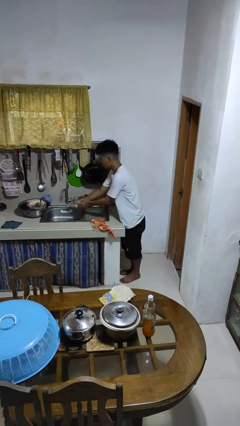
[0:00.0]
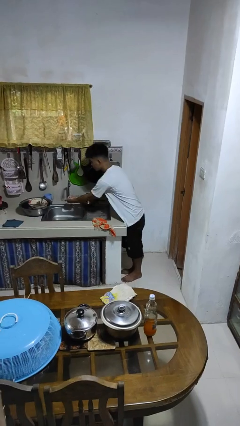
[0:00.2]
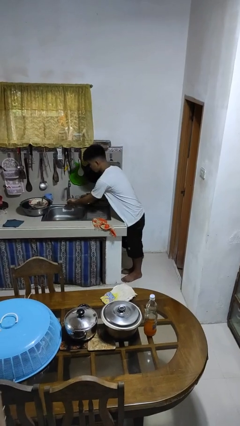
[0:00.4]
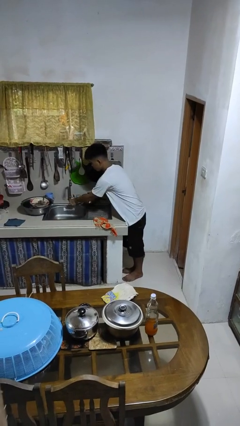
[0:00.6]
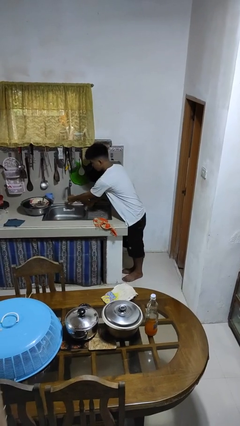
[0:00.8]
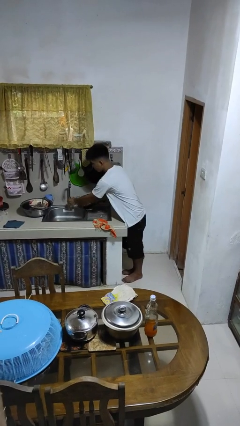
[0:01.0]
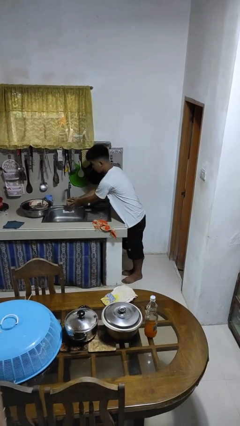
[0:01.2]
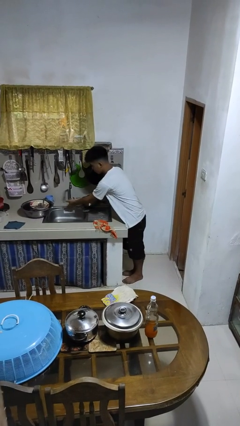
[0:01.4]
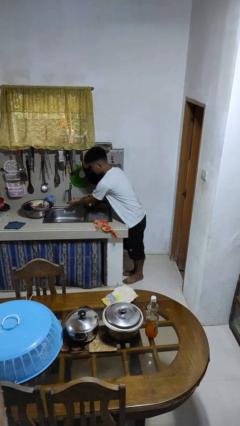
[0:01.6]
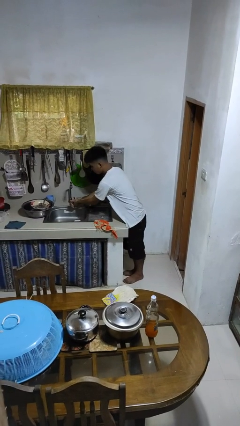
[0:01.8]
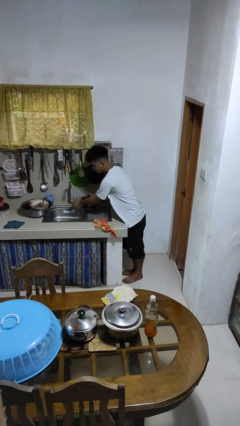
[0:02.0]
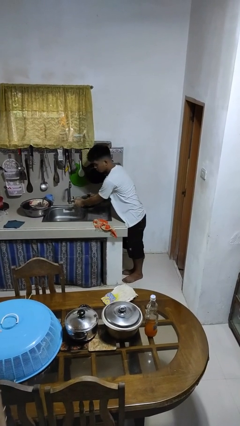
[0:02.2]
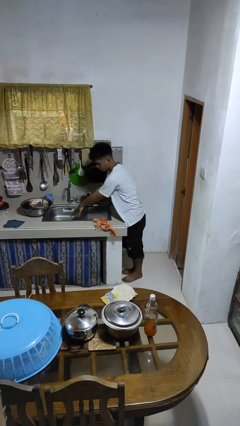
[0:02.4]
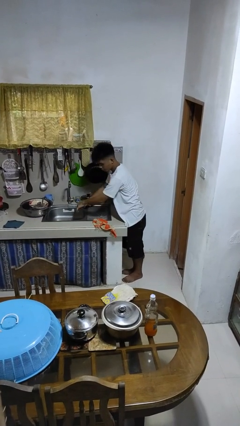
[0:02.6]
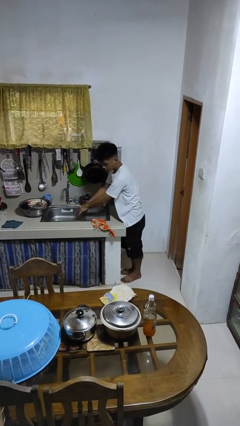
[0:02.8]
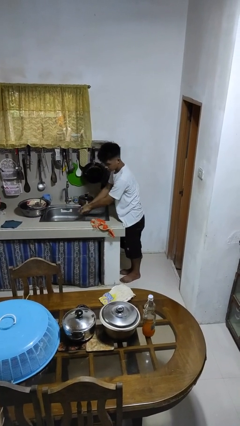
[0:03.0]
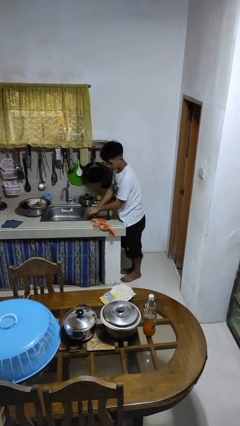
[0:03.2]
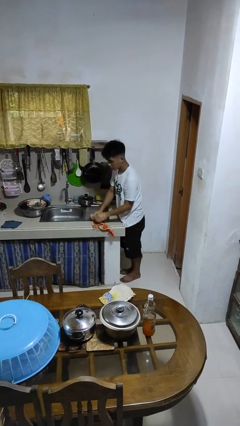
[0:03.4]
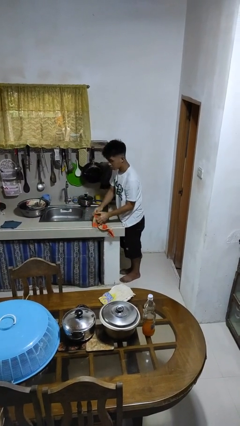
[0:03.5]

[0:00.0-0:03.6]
person washes hands

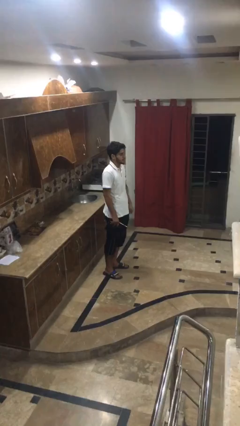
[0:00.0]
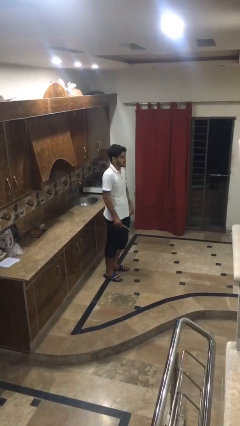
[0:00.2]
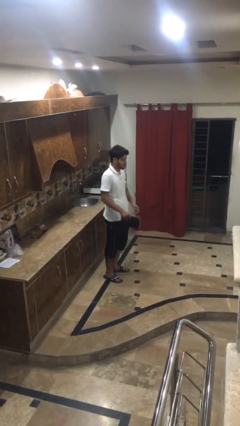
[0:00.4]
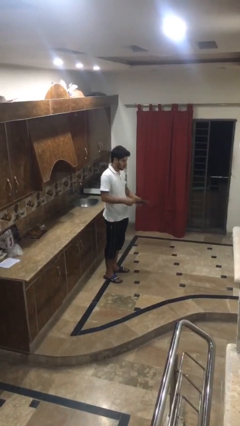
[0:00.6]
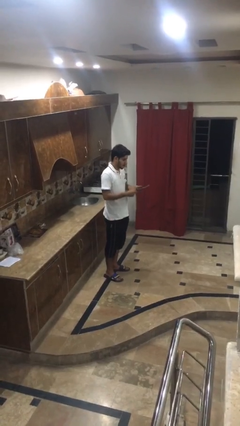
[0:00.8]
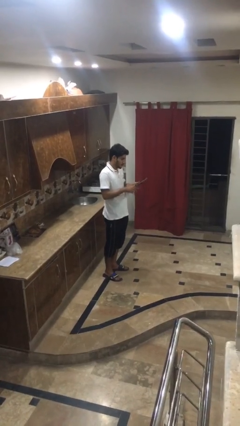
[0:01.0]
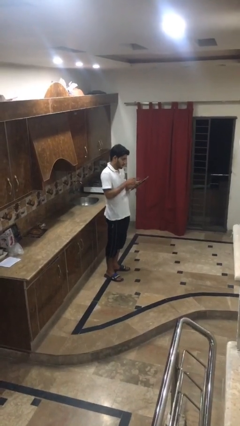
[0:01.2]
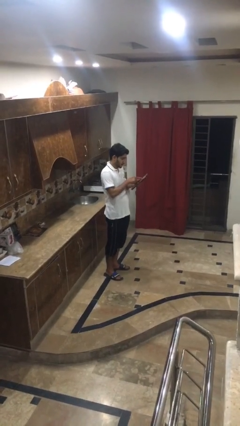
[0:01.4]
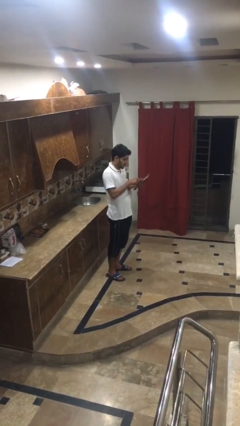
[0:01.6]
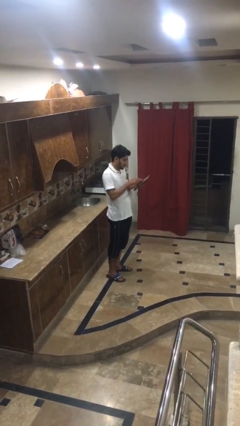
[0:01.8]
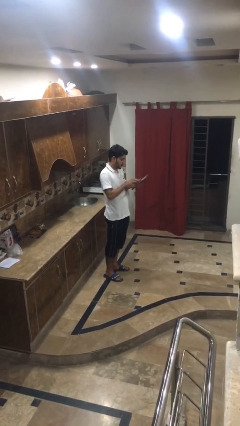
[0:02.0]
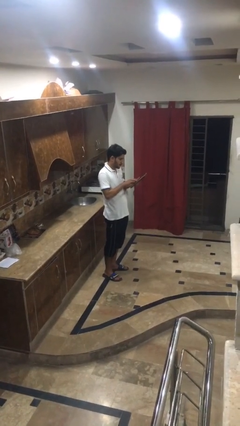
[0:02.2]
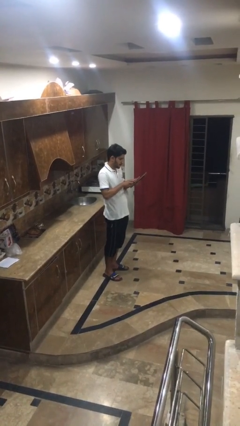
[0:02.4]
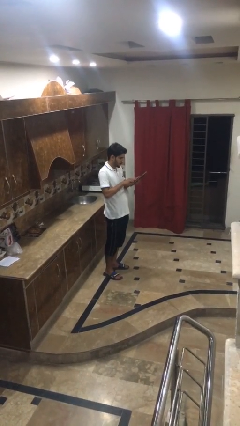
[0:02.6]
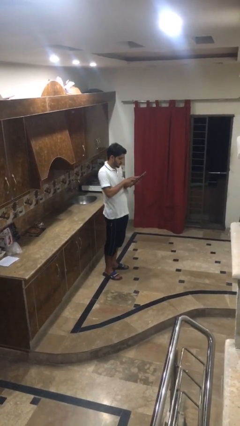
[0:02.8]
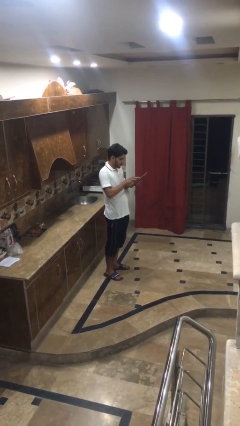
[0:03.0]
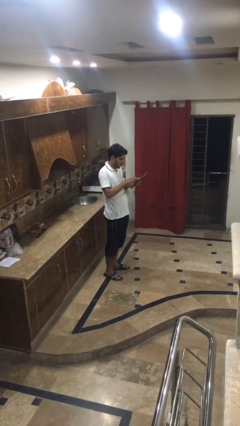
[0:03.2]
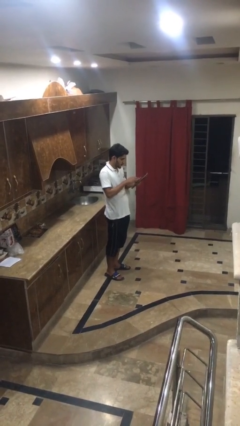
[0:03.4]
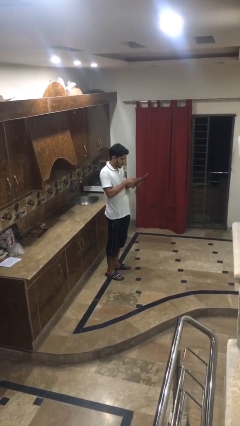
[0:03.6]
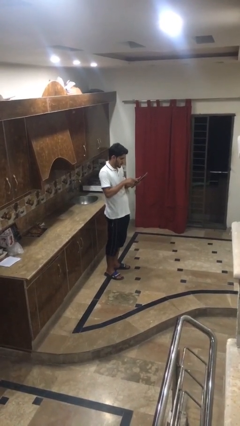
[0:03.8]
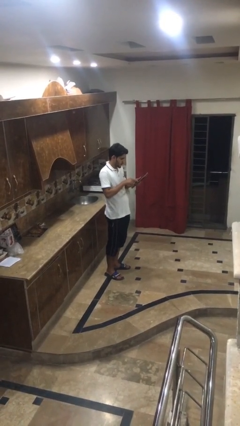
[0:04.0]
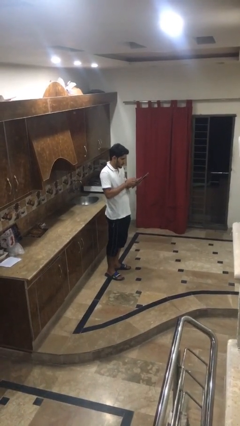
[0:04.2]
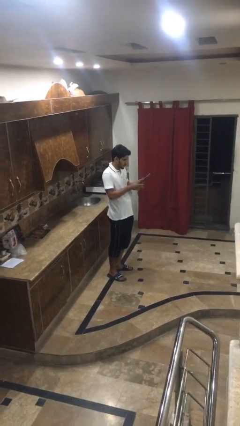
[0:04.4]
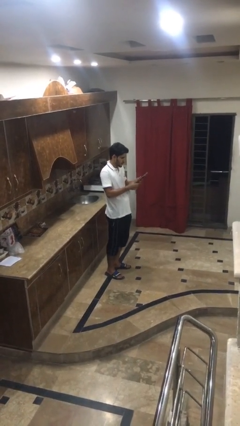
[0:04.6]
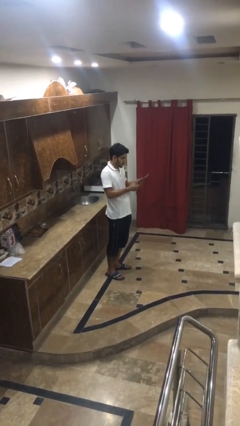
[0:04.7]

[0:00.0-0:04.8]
person interacts with tablet

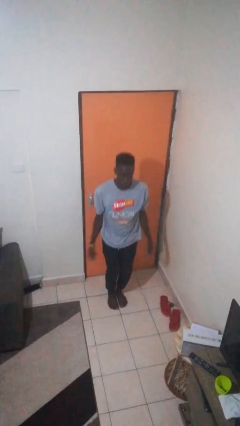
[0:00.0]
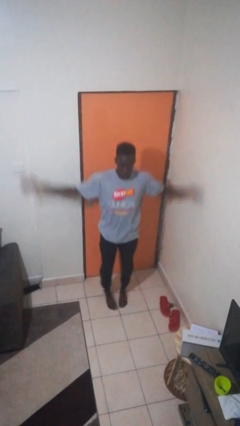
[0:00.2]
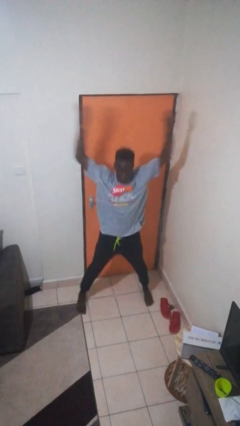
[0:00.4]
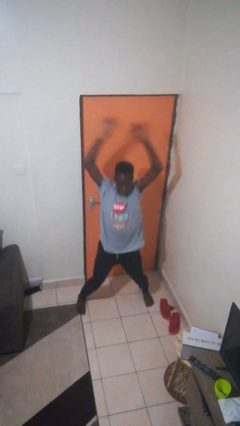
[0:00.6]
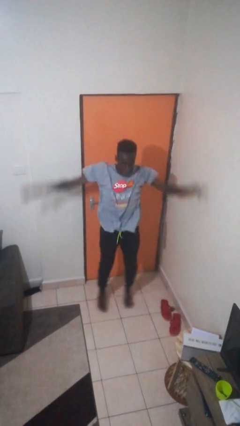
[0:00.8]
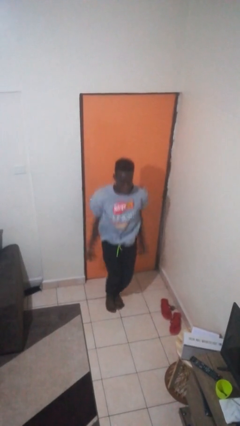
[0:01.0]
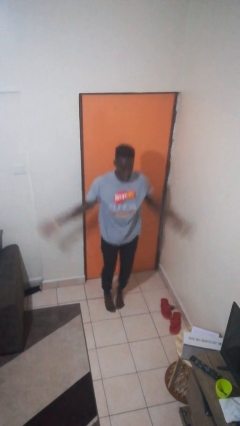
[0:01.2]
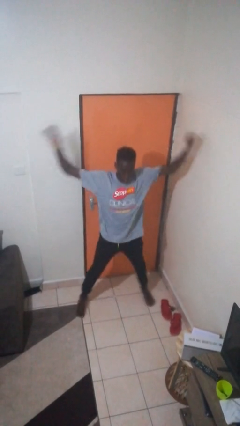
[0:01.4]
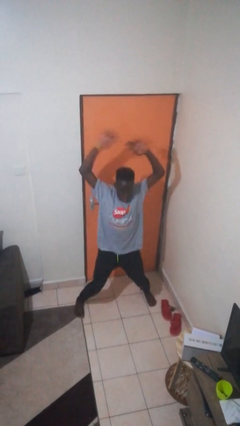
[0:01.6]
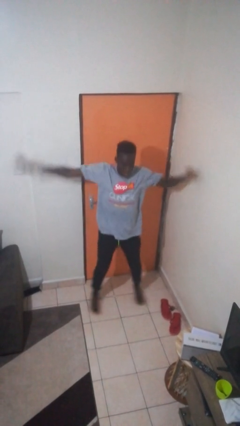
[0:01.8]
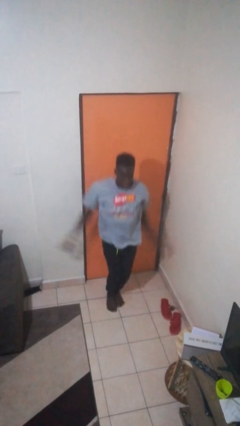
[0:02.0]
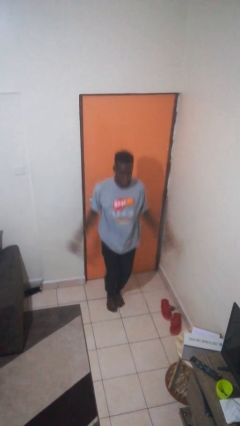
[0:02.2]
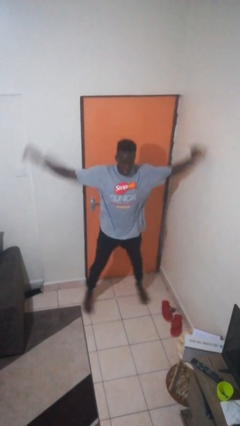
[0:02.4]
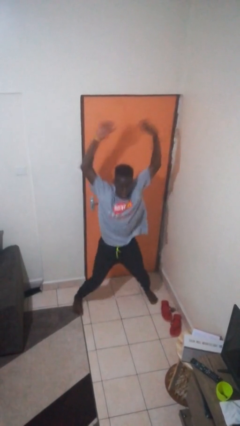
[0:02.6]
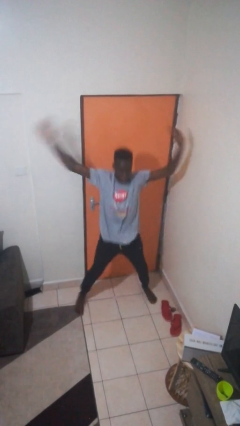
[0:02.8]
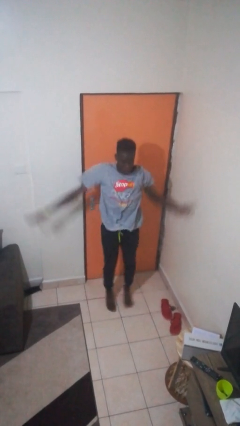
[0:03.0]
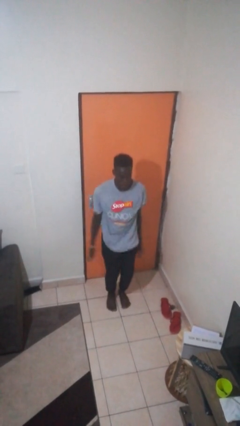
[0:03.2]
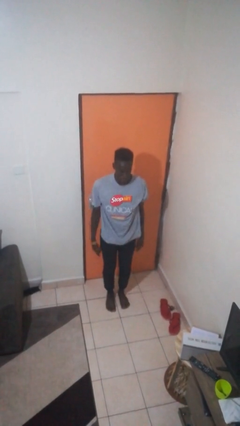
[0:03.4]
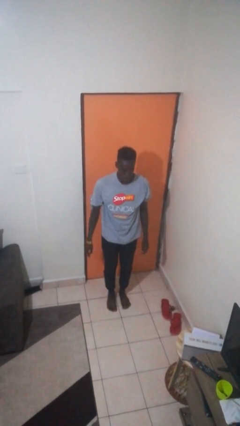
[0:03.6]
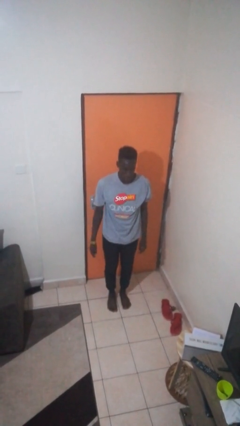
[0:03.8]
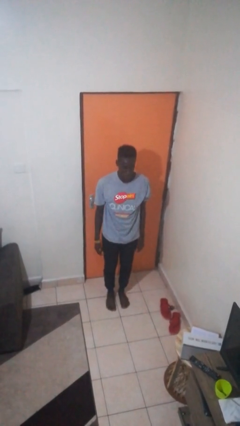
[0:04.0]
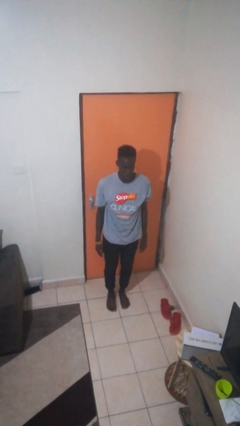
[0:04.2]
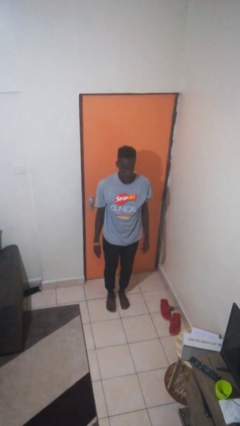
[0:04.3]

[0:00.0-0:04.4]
person exercises with jumping jacks

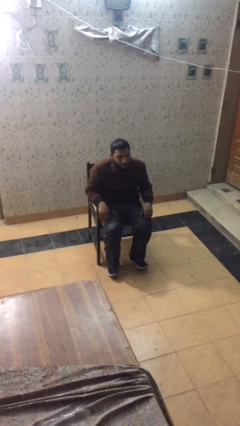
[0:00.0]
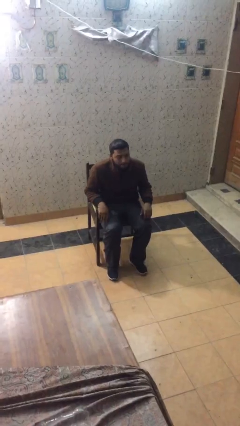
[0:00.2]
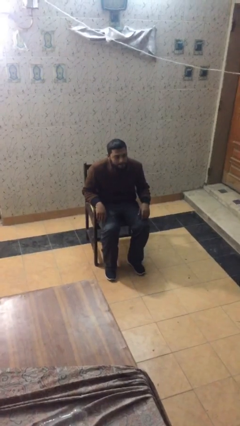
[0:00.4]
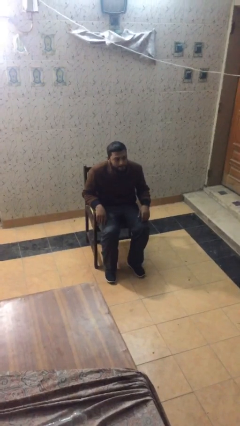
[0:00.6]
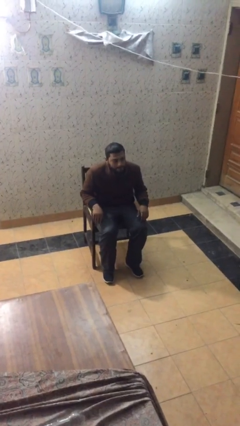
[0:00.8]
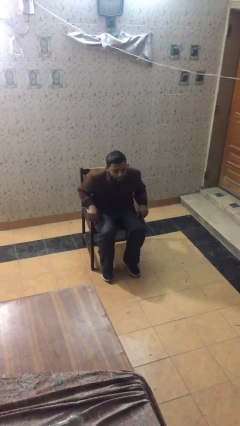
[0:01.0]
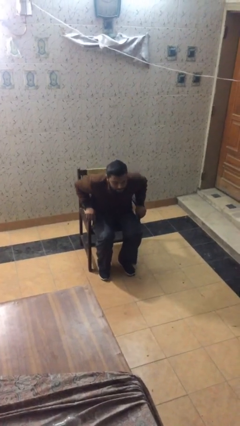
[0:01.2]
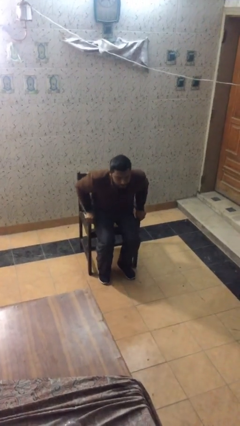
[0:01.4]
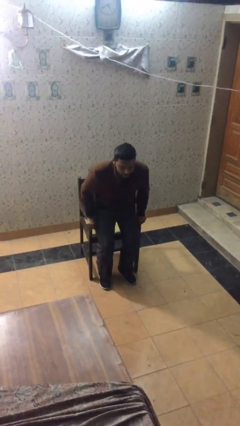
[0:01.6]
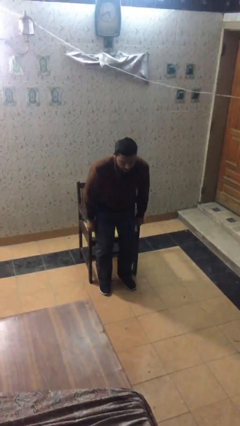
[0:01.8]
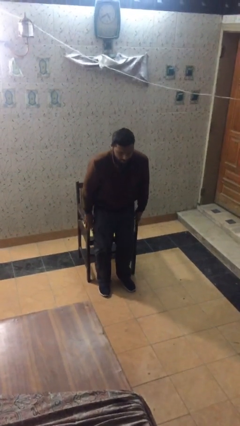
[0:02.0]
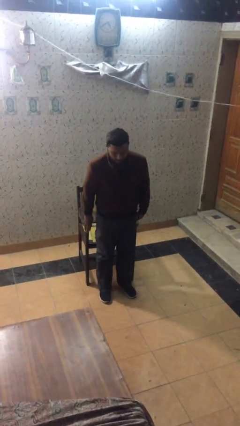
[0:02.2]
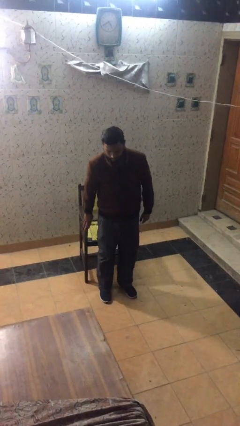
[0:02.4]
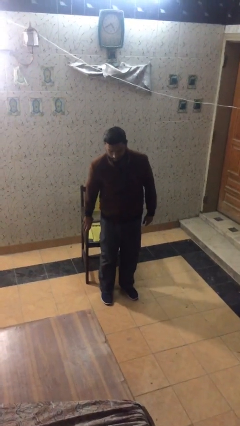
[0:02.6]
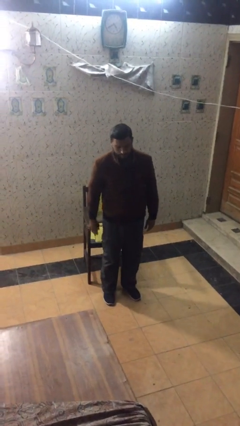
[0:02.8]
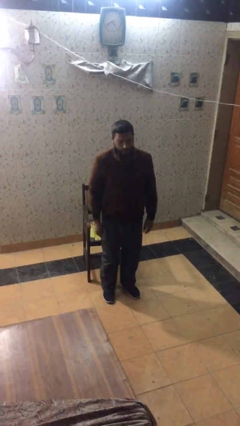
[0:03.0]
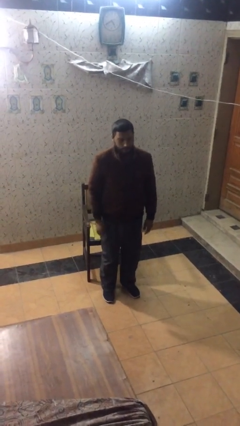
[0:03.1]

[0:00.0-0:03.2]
person stands up

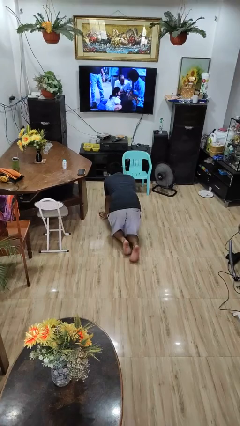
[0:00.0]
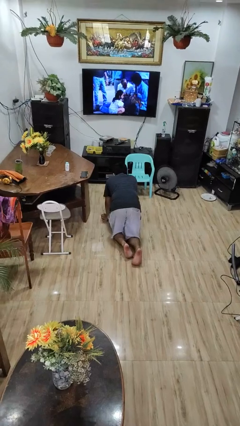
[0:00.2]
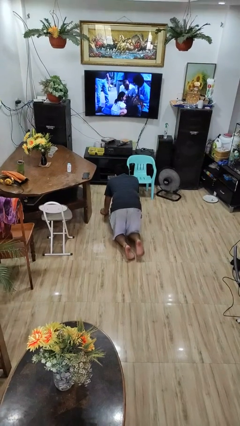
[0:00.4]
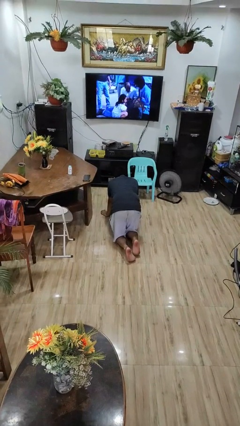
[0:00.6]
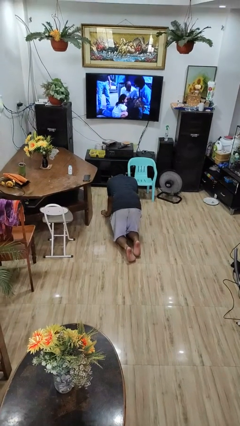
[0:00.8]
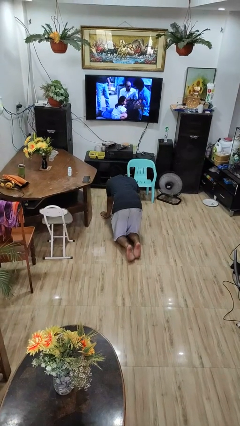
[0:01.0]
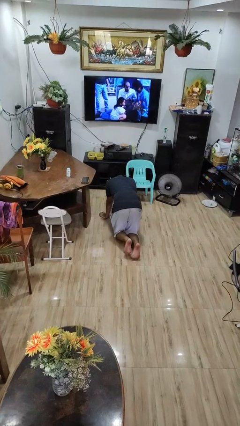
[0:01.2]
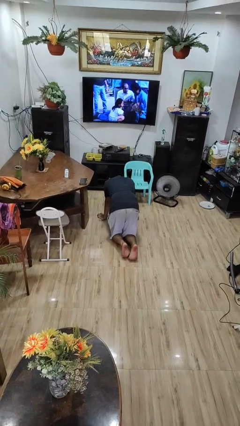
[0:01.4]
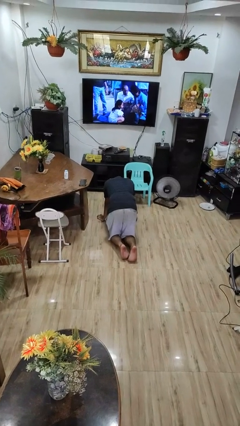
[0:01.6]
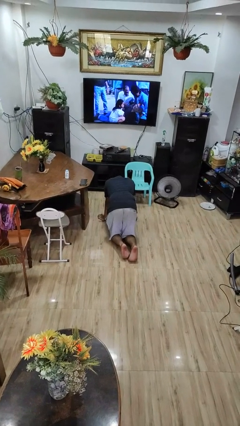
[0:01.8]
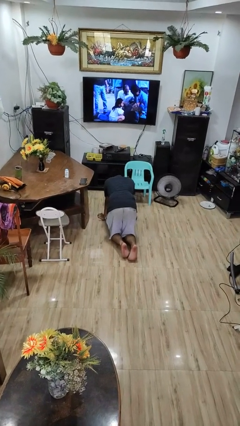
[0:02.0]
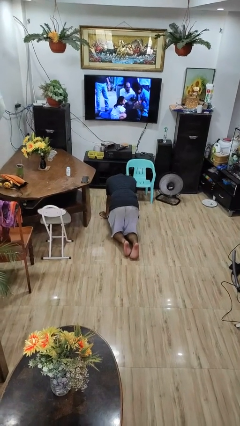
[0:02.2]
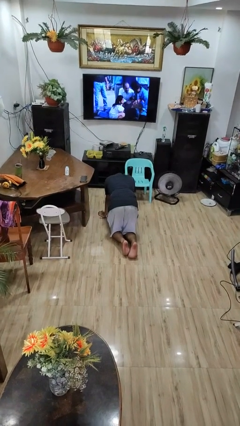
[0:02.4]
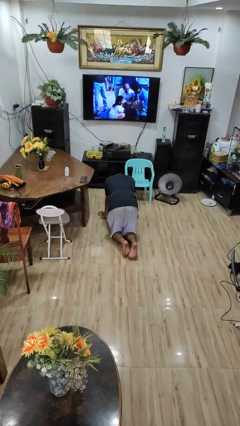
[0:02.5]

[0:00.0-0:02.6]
person crawls
